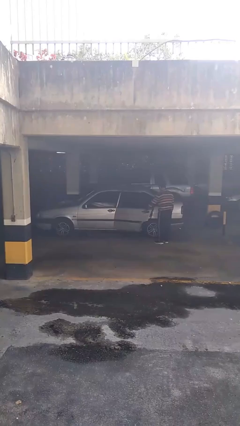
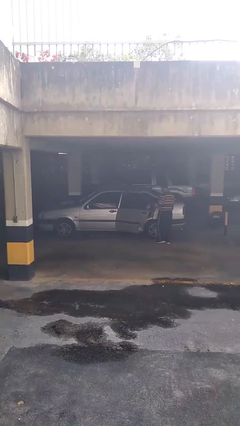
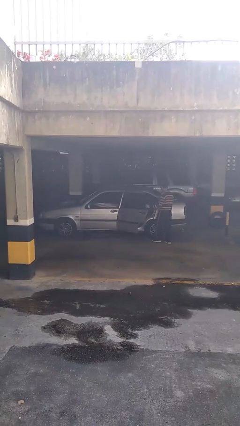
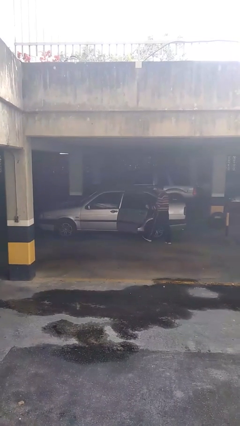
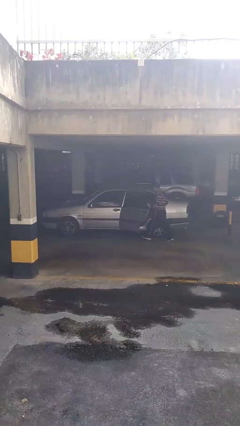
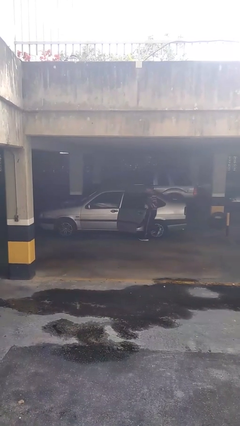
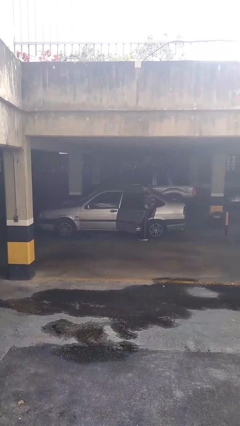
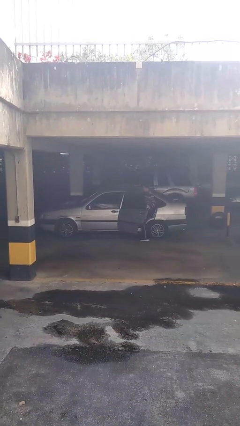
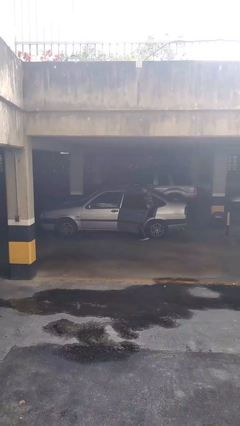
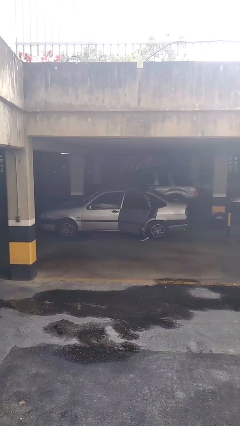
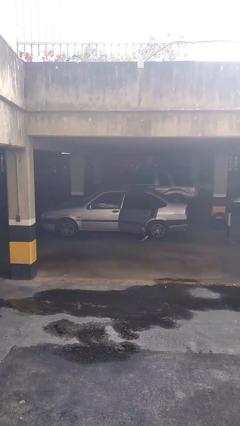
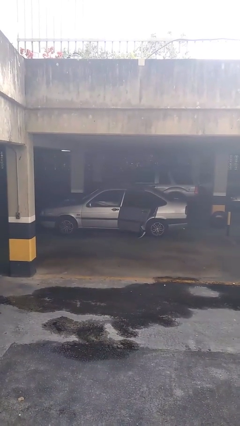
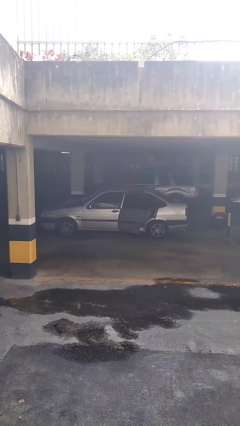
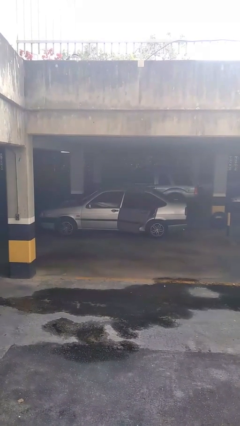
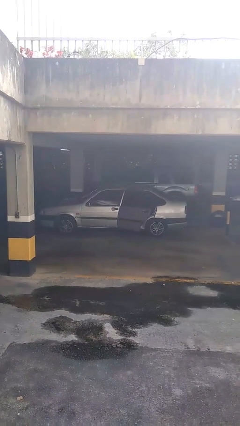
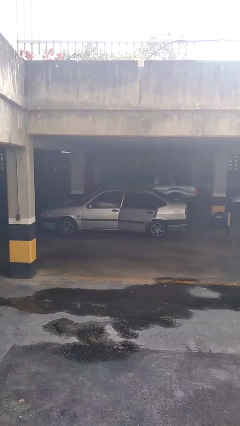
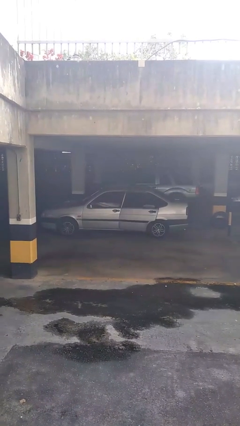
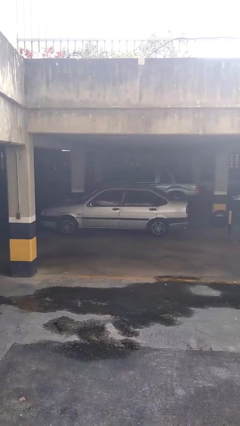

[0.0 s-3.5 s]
car picks up person

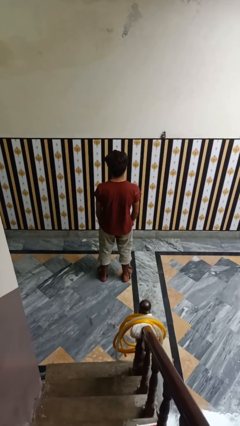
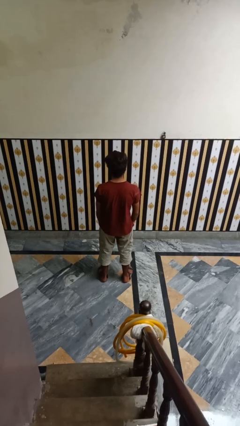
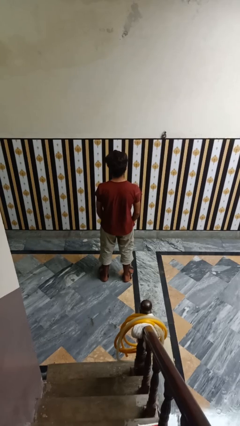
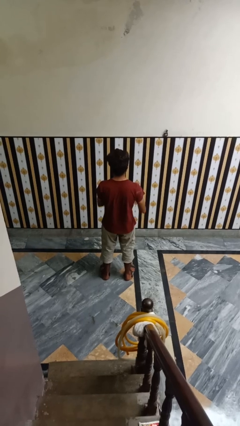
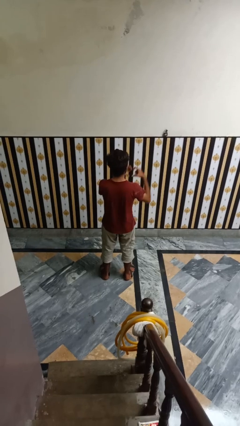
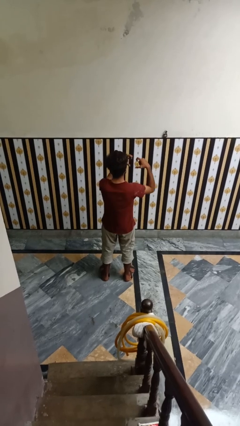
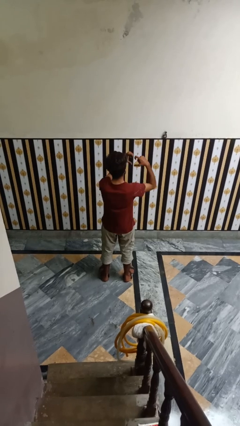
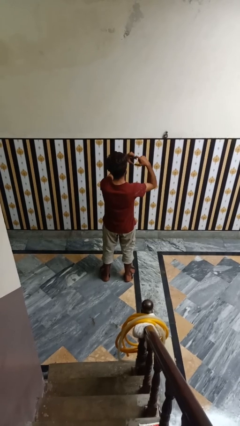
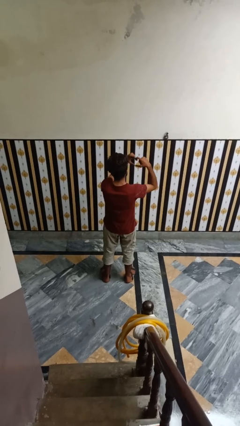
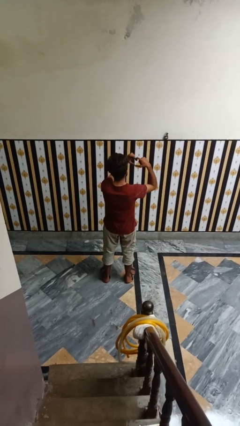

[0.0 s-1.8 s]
person gestures heart

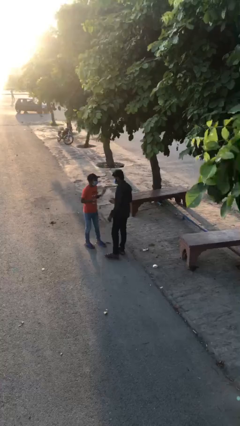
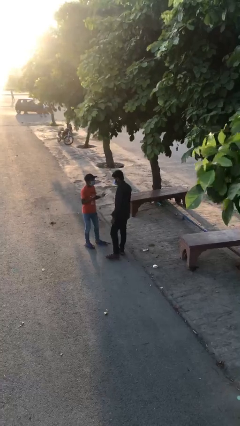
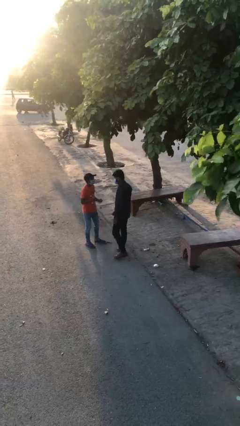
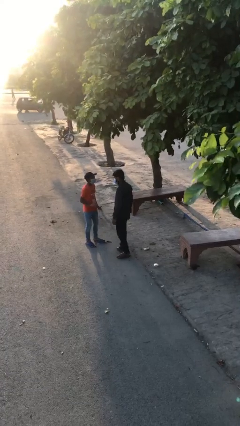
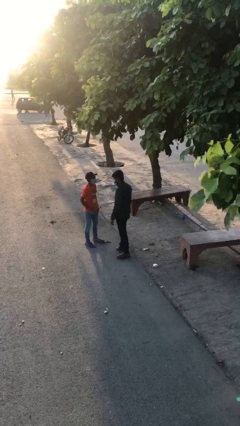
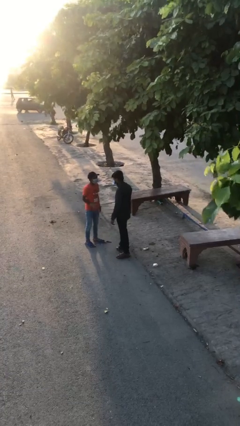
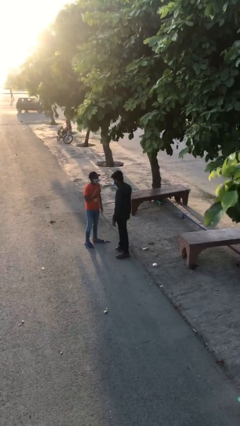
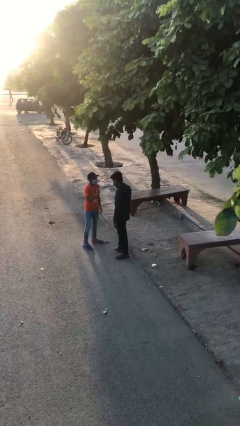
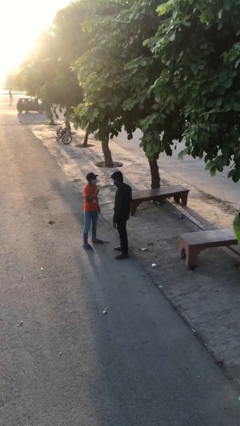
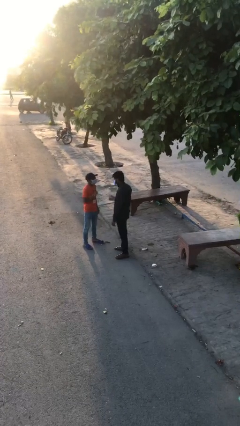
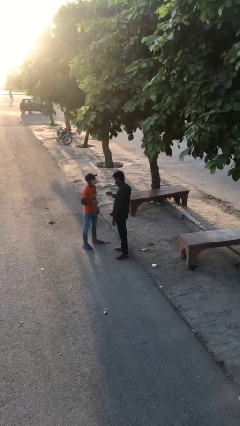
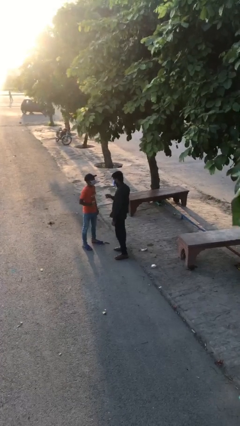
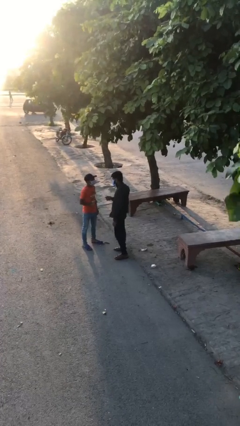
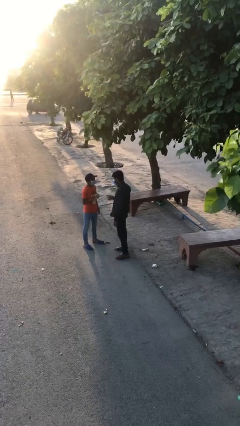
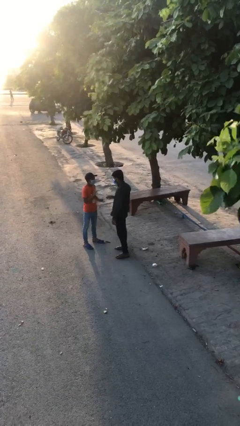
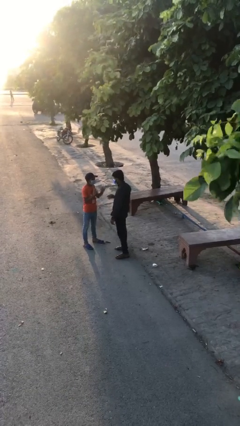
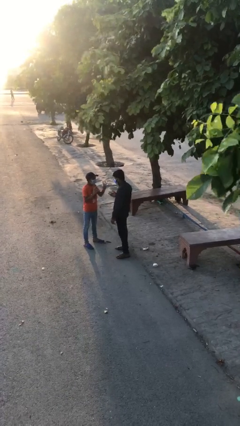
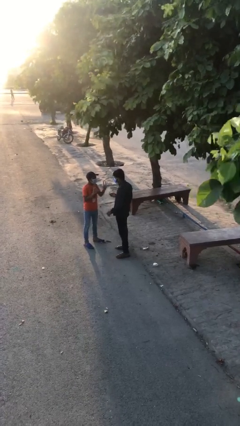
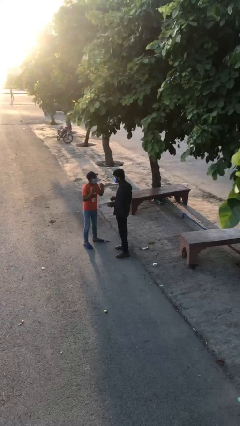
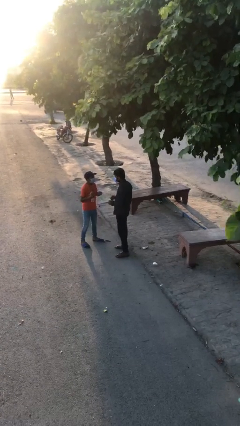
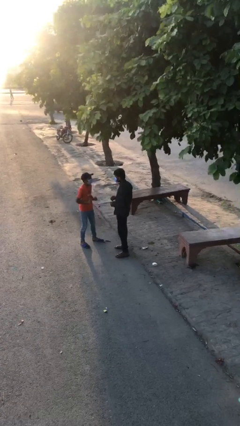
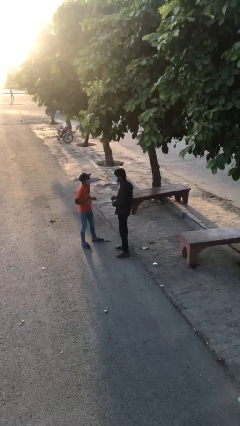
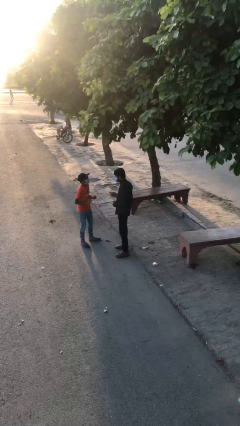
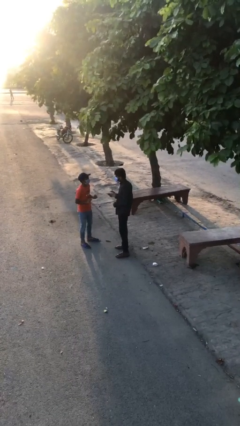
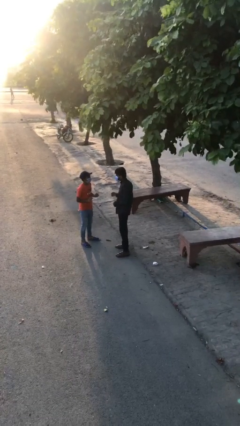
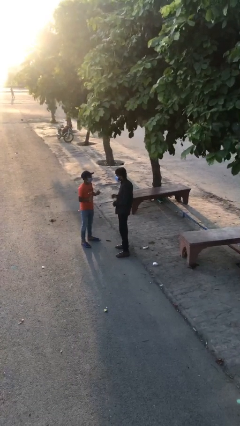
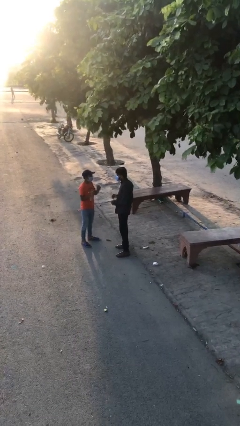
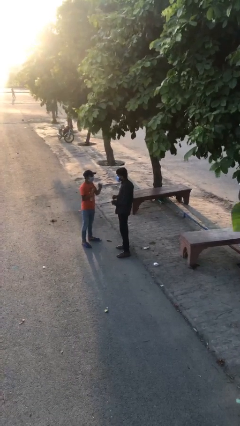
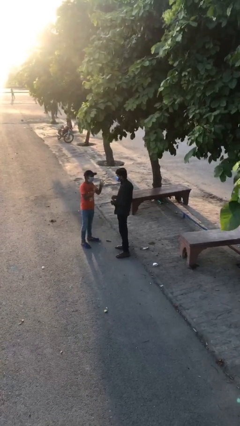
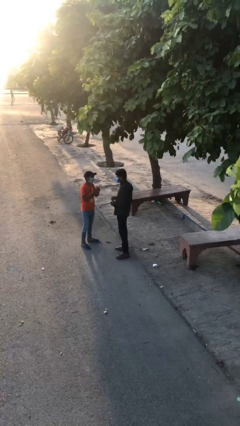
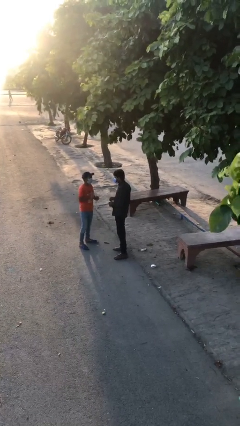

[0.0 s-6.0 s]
person talks to person

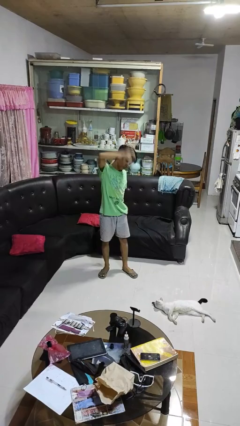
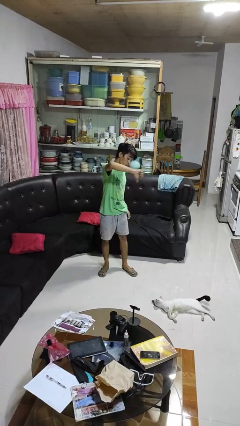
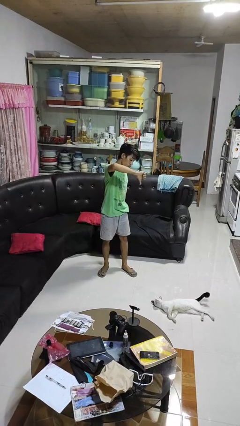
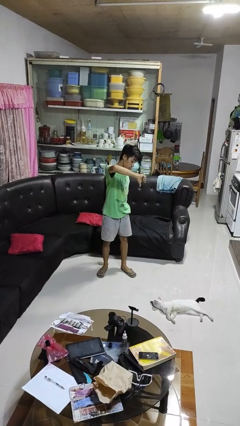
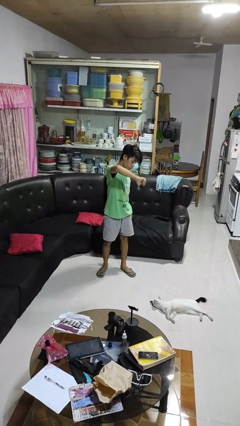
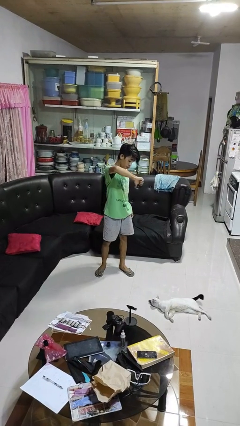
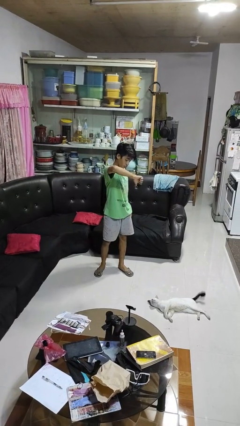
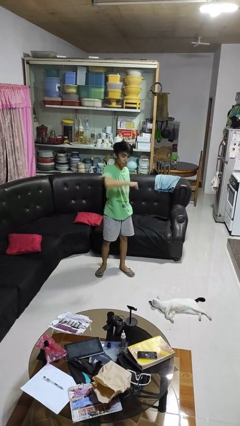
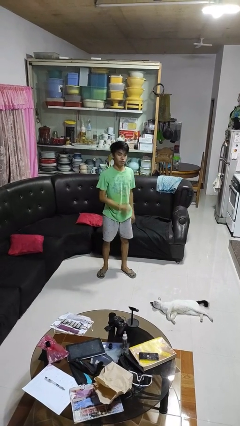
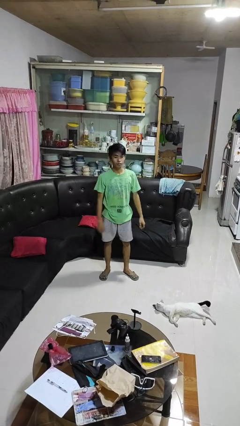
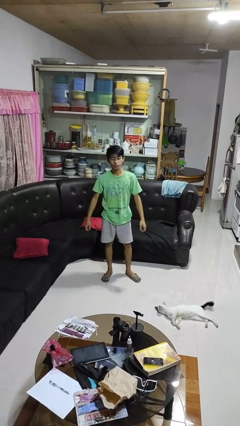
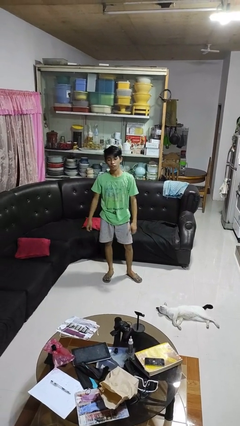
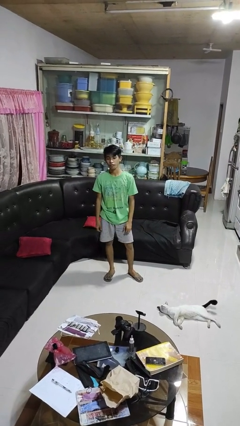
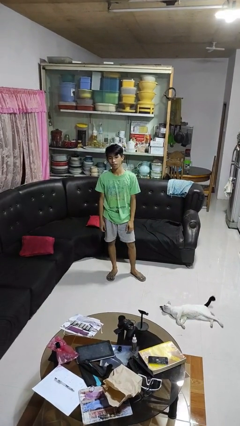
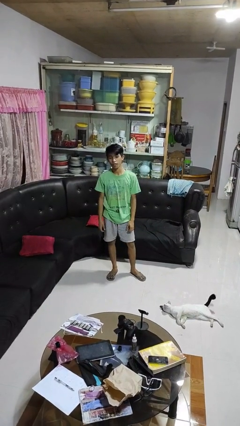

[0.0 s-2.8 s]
person gestures thumbs down

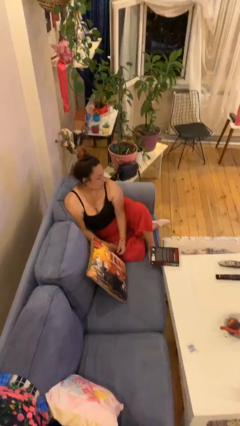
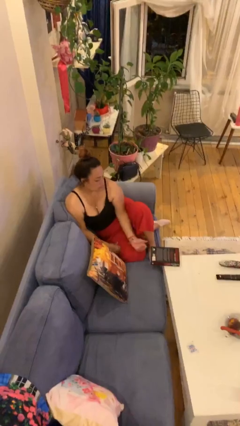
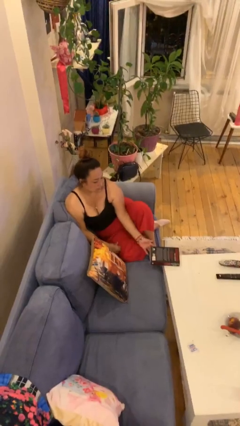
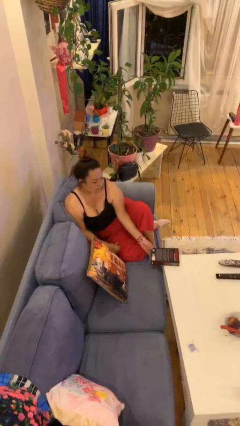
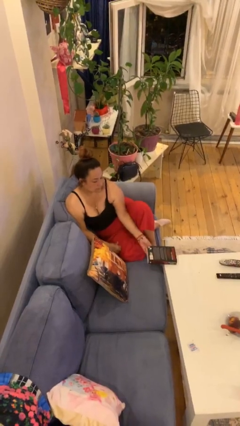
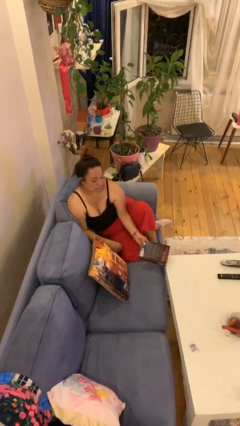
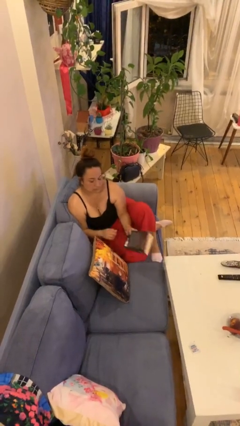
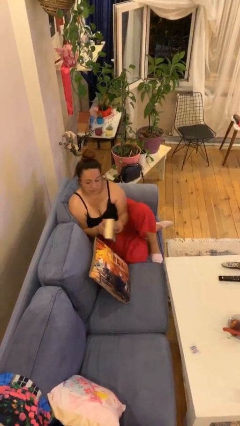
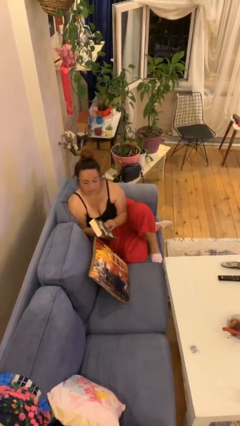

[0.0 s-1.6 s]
person picks up object from table

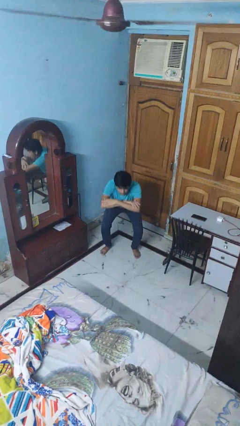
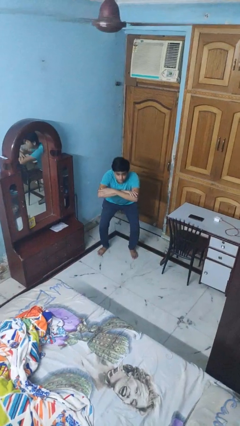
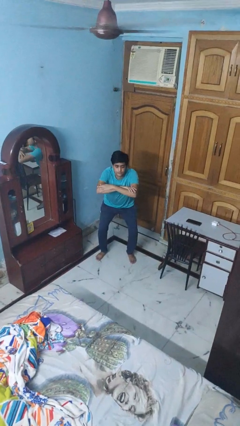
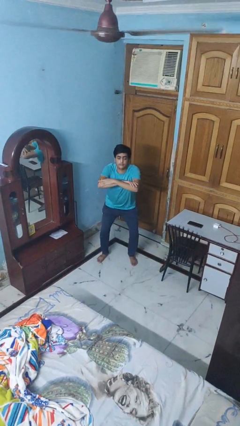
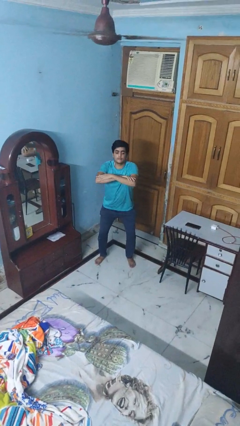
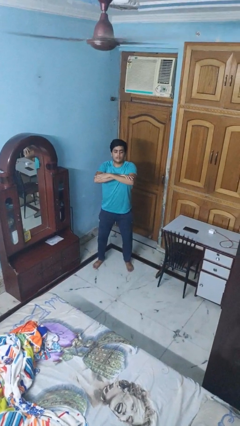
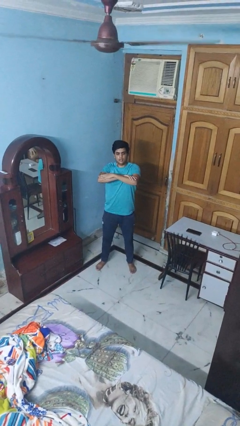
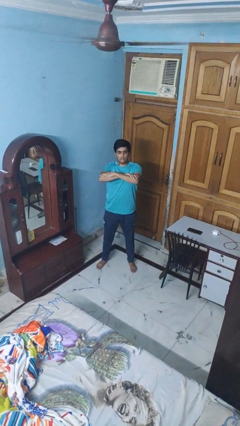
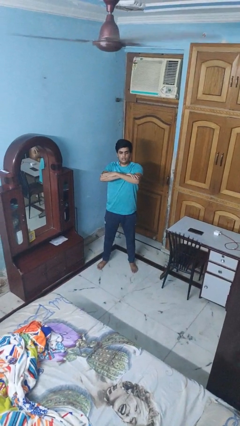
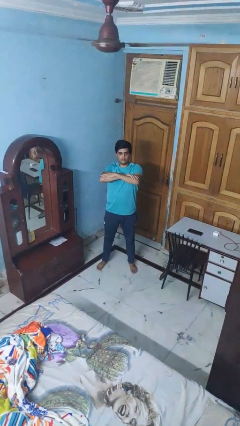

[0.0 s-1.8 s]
person stands up
